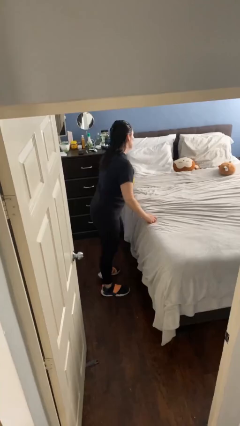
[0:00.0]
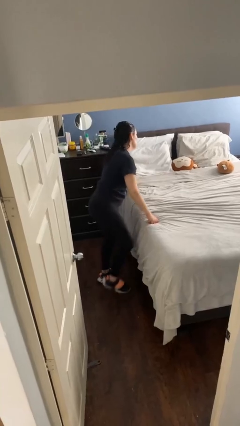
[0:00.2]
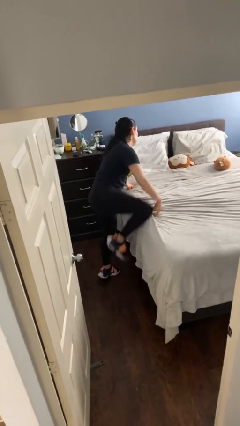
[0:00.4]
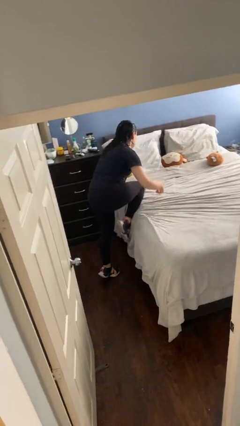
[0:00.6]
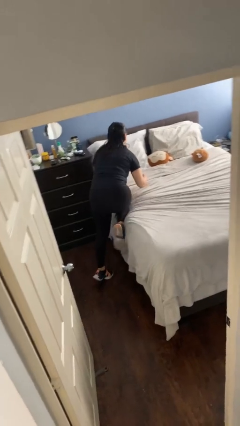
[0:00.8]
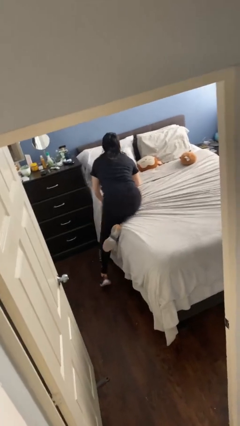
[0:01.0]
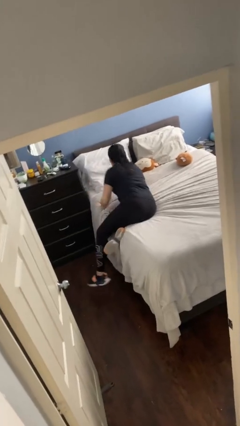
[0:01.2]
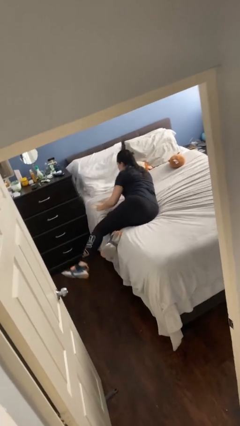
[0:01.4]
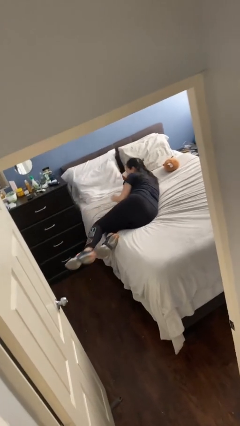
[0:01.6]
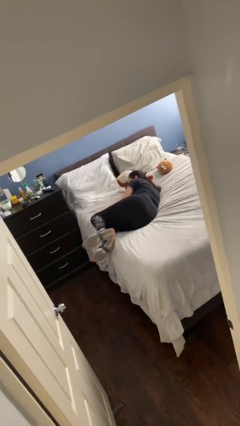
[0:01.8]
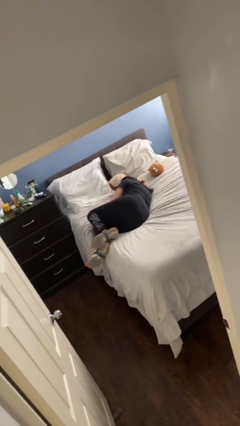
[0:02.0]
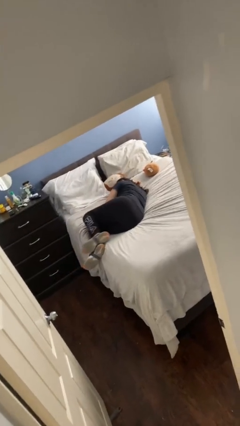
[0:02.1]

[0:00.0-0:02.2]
person lies down on bed

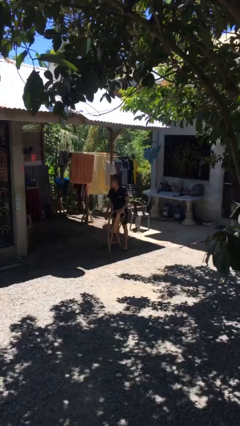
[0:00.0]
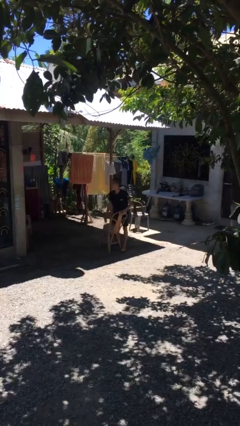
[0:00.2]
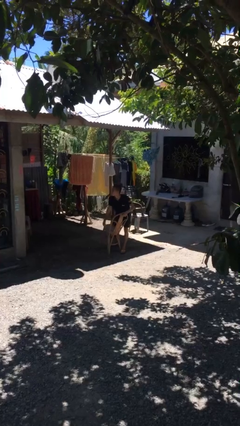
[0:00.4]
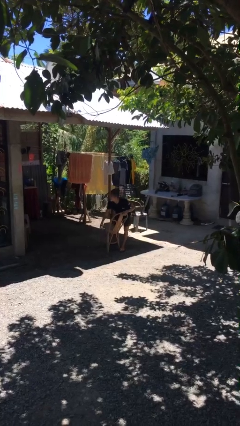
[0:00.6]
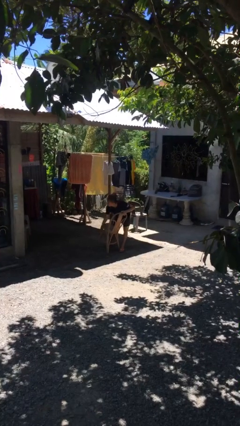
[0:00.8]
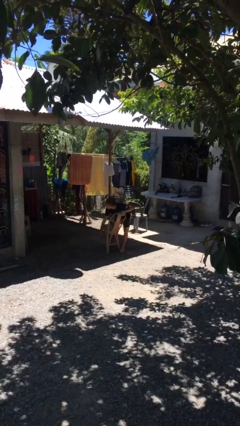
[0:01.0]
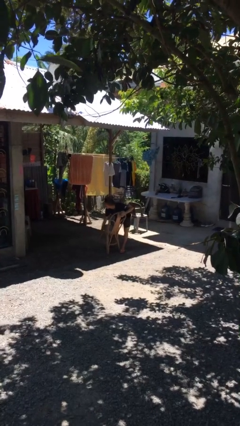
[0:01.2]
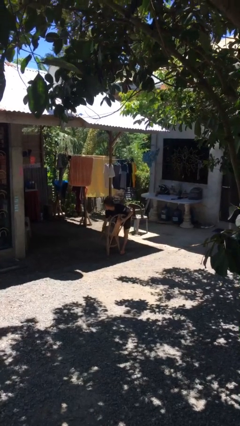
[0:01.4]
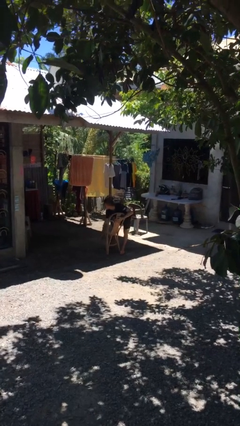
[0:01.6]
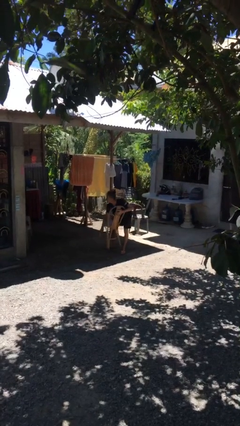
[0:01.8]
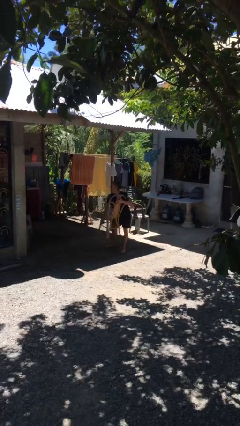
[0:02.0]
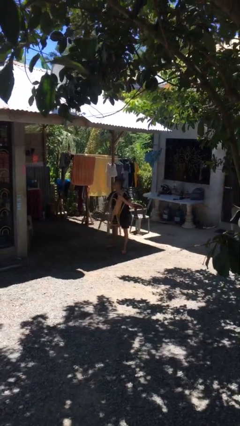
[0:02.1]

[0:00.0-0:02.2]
person picks up object from floor

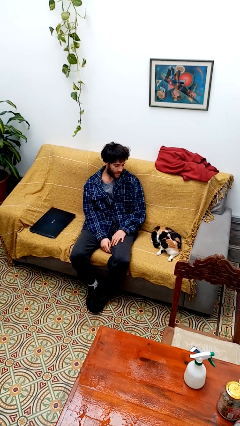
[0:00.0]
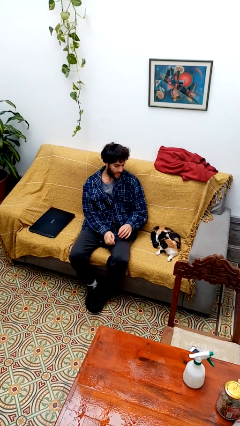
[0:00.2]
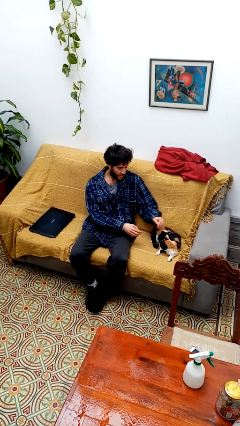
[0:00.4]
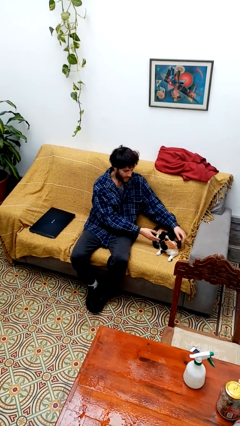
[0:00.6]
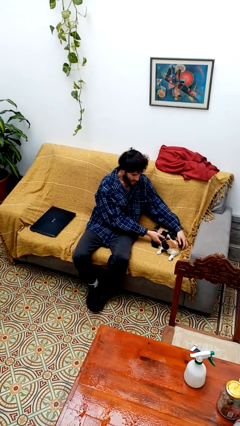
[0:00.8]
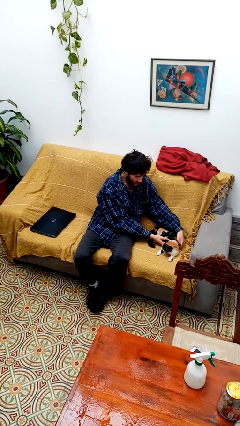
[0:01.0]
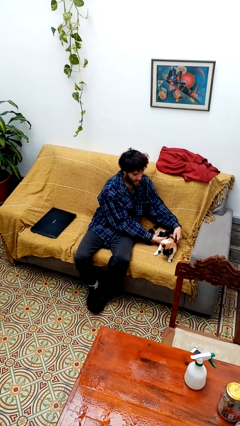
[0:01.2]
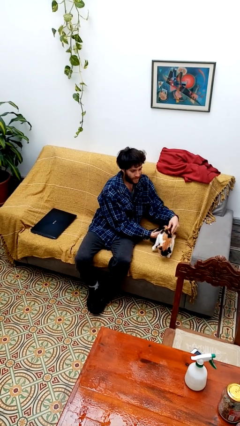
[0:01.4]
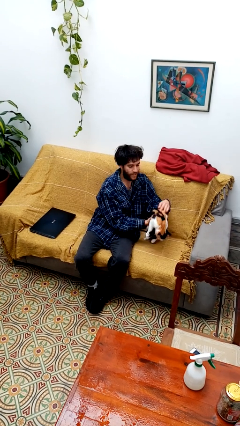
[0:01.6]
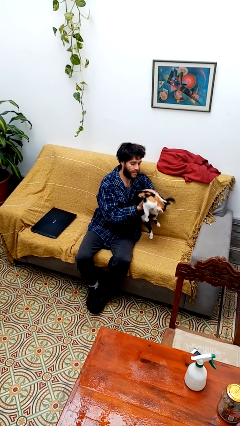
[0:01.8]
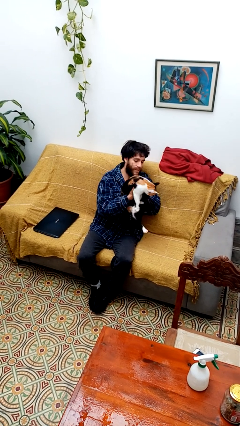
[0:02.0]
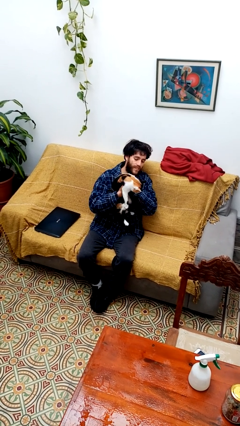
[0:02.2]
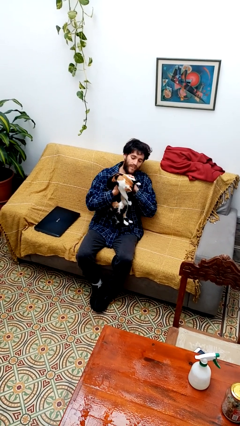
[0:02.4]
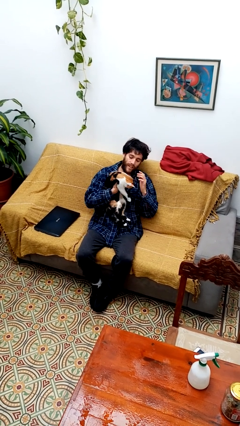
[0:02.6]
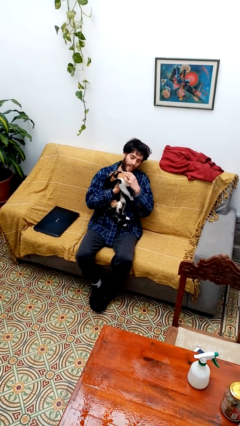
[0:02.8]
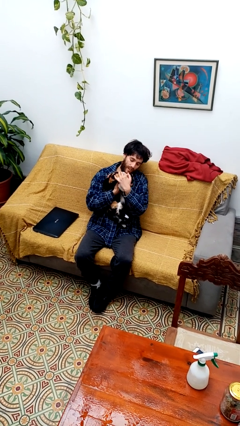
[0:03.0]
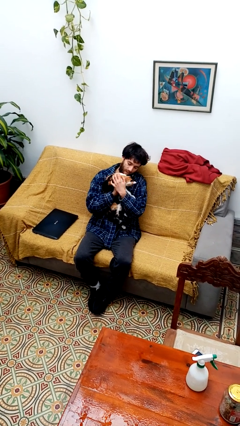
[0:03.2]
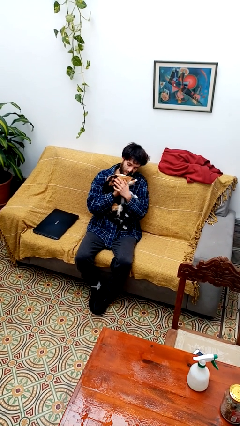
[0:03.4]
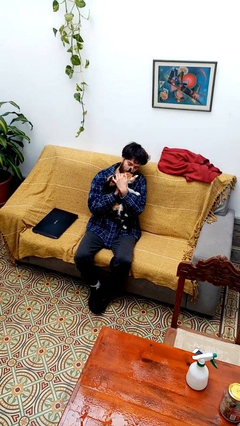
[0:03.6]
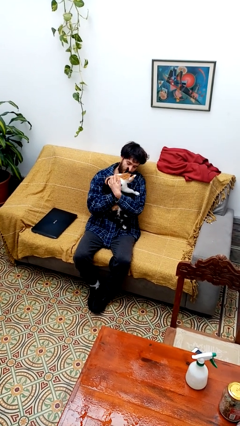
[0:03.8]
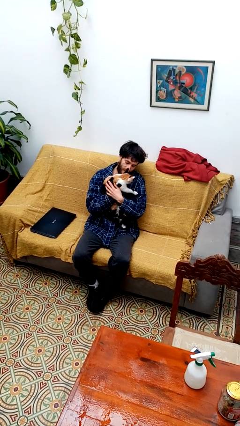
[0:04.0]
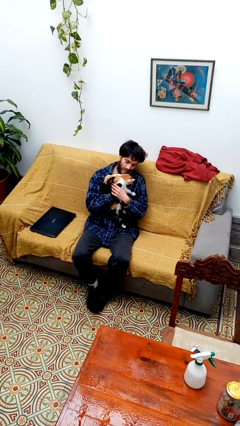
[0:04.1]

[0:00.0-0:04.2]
person hugs cat

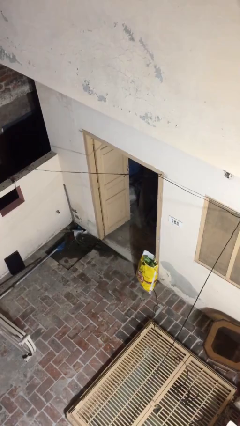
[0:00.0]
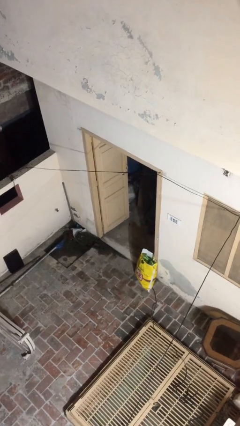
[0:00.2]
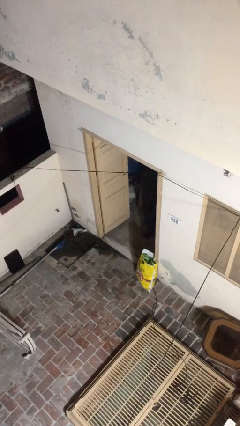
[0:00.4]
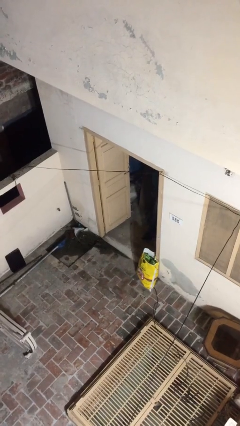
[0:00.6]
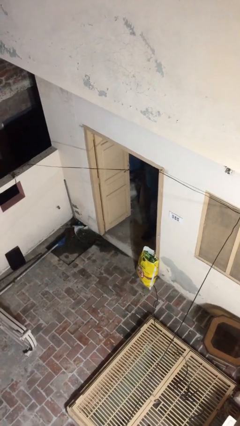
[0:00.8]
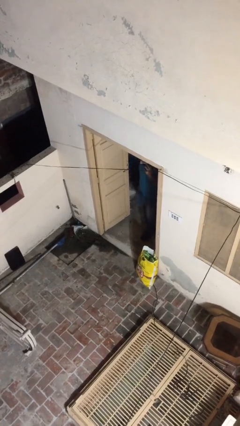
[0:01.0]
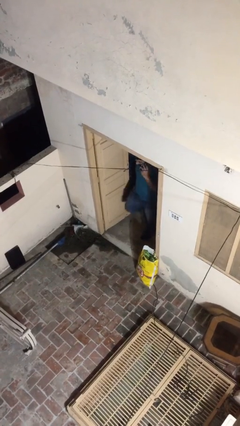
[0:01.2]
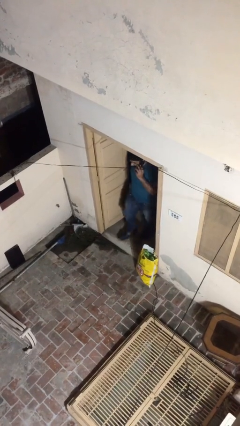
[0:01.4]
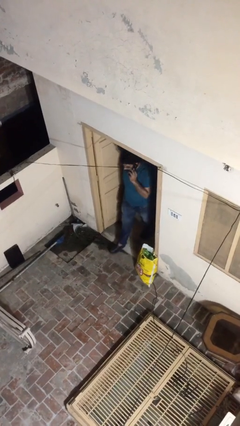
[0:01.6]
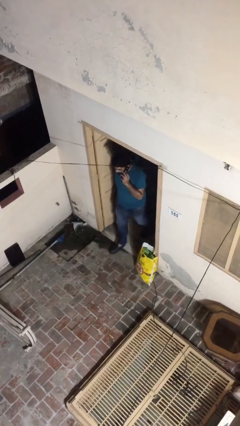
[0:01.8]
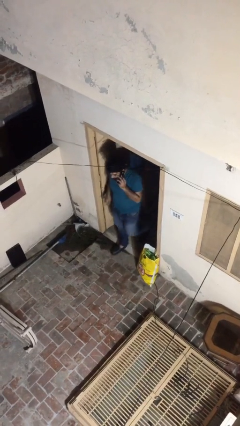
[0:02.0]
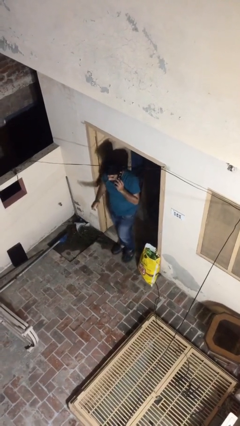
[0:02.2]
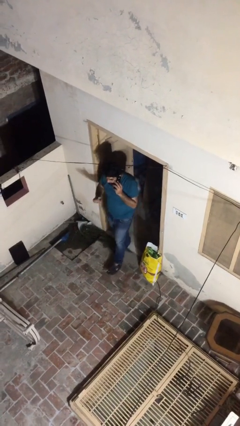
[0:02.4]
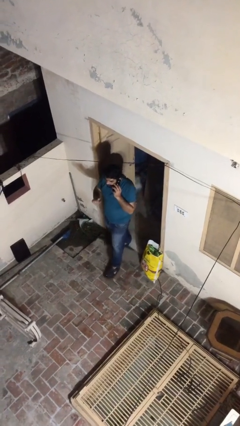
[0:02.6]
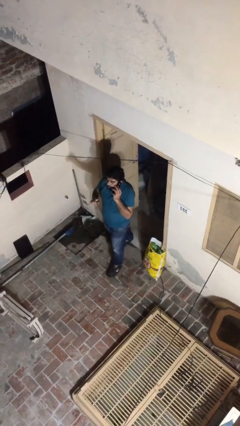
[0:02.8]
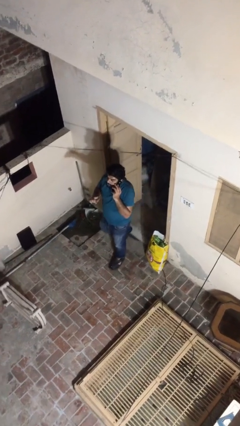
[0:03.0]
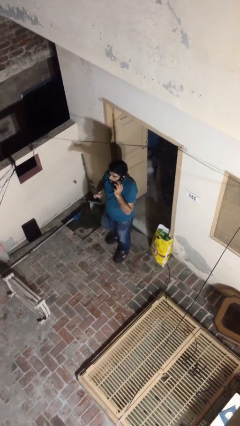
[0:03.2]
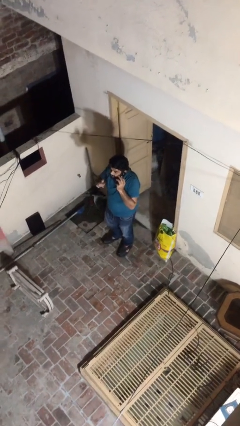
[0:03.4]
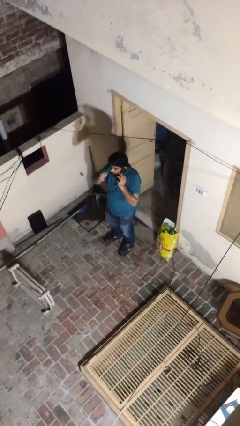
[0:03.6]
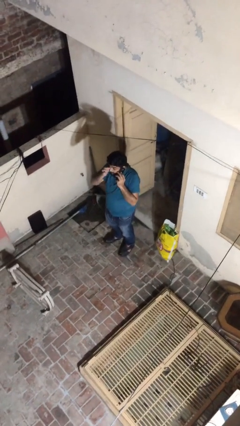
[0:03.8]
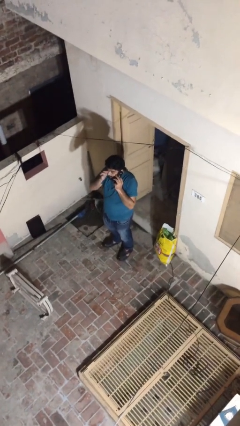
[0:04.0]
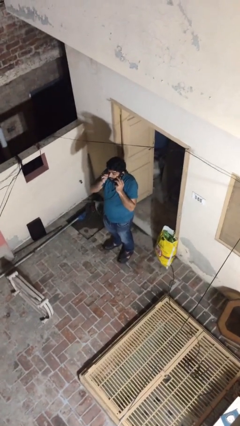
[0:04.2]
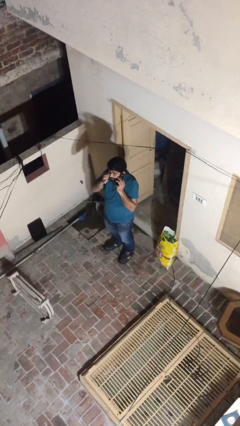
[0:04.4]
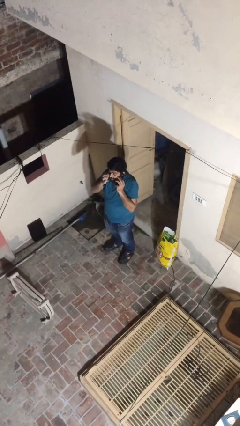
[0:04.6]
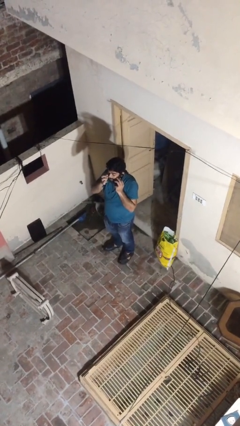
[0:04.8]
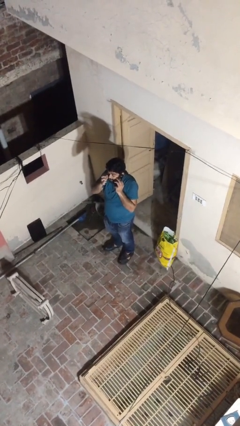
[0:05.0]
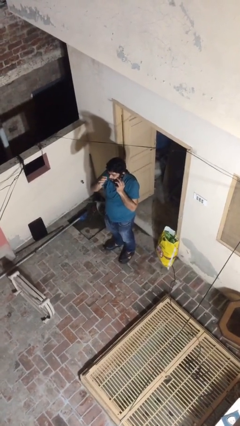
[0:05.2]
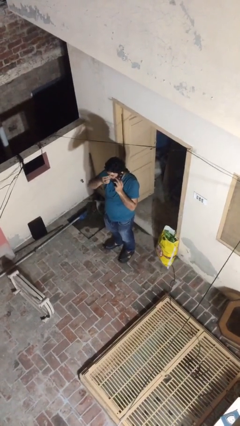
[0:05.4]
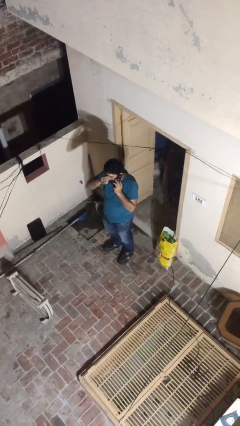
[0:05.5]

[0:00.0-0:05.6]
person enters scene through structure

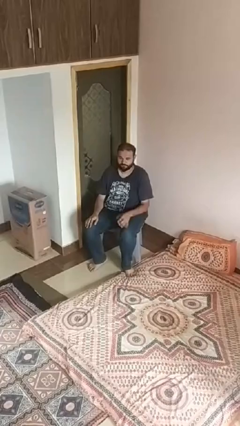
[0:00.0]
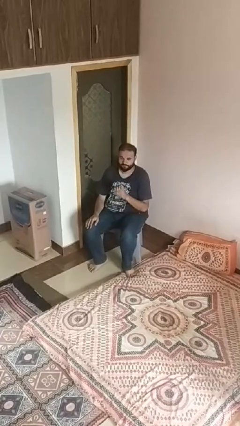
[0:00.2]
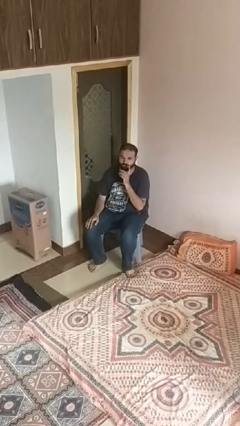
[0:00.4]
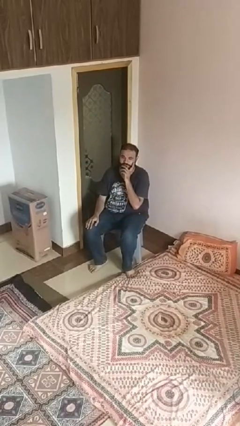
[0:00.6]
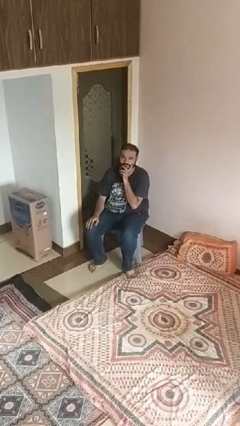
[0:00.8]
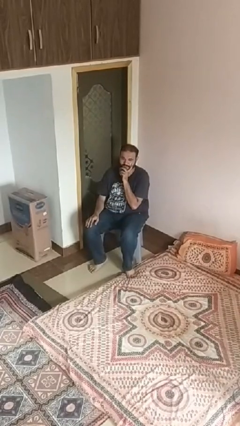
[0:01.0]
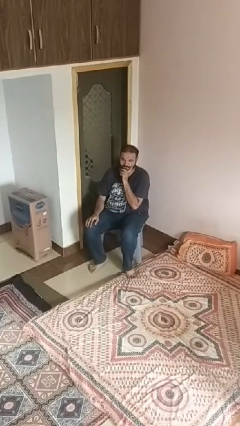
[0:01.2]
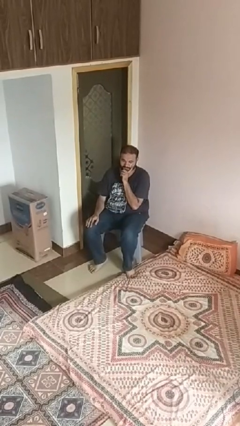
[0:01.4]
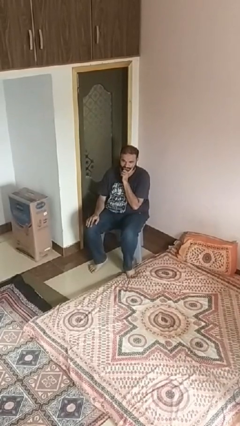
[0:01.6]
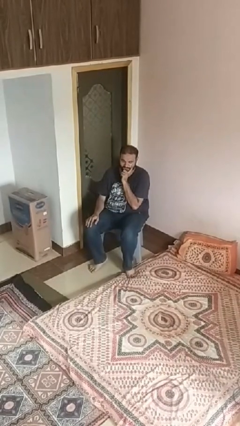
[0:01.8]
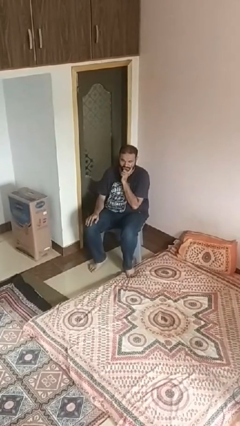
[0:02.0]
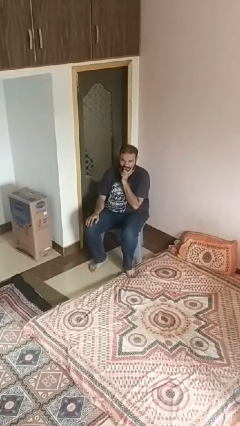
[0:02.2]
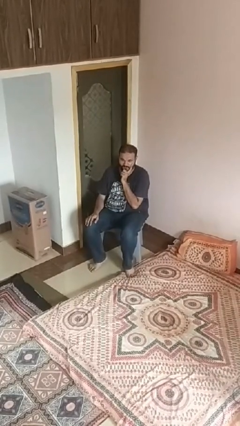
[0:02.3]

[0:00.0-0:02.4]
person strokes chin

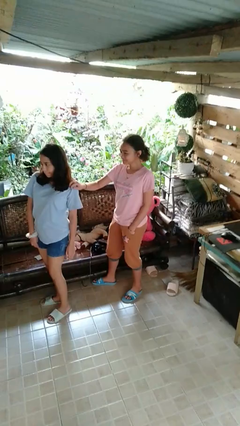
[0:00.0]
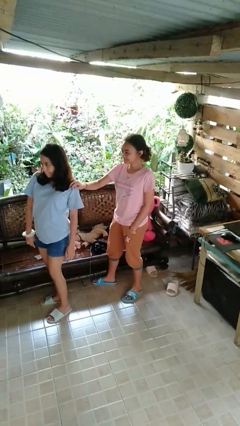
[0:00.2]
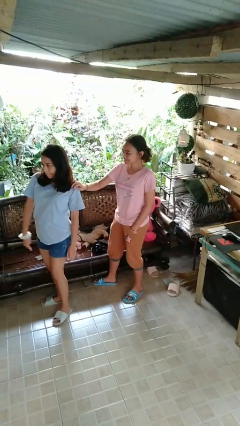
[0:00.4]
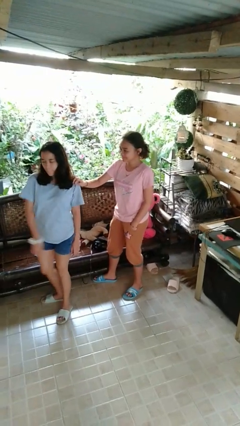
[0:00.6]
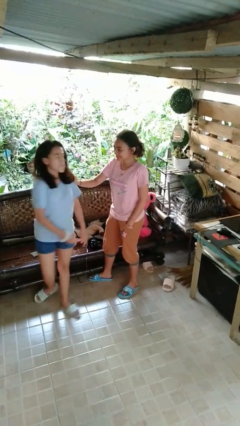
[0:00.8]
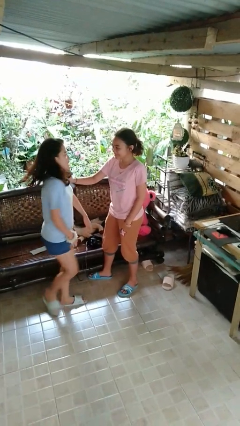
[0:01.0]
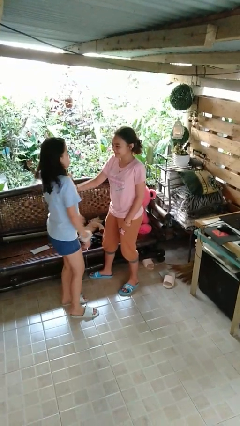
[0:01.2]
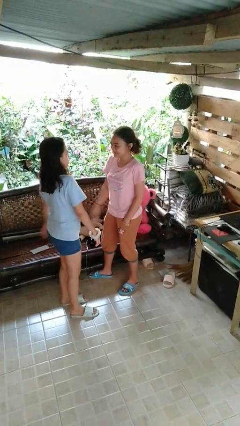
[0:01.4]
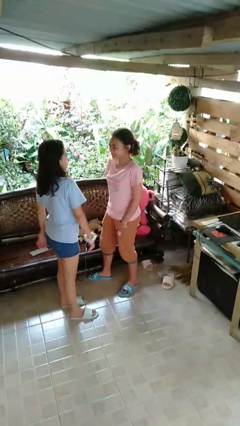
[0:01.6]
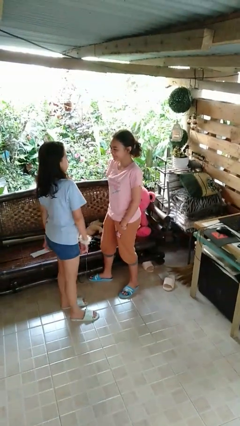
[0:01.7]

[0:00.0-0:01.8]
person spins person around
